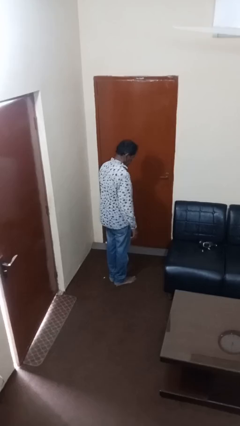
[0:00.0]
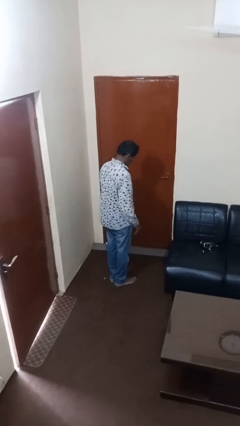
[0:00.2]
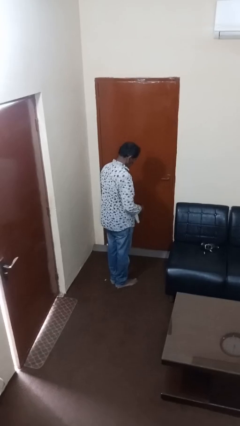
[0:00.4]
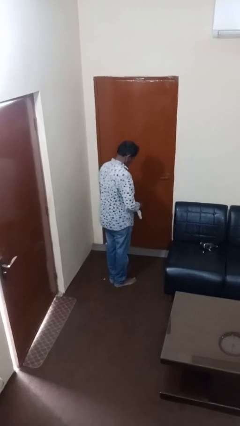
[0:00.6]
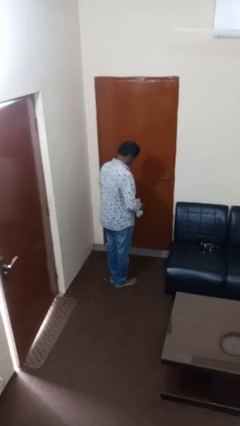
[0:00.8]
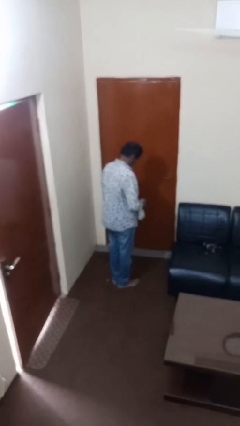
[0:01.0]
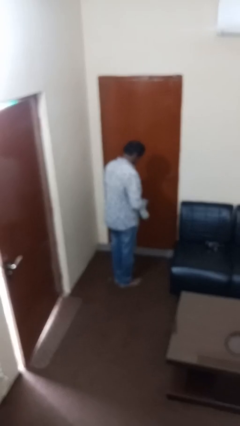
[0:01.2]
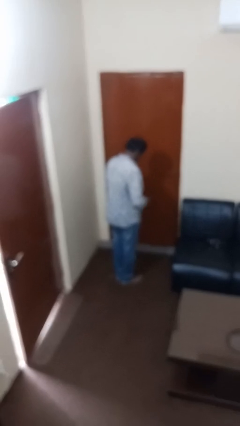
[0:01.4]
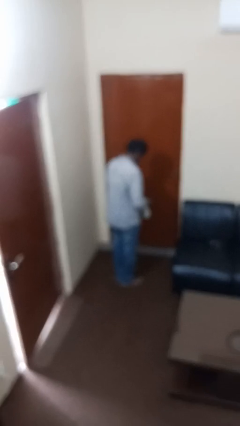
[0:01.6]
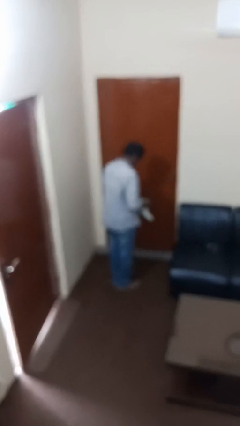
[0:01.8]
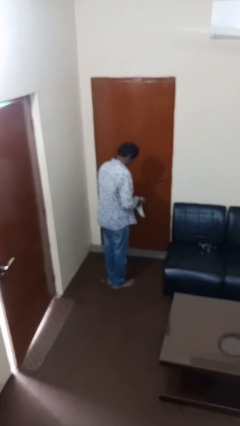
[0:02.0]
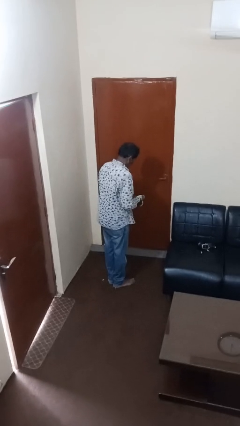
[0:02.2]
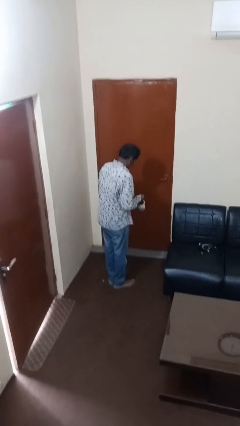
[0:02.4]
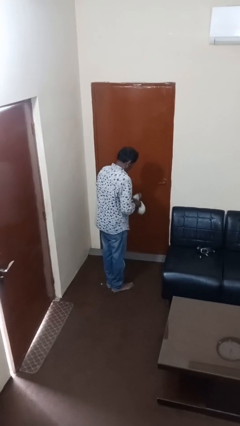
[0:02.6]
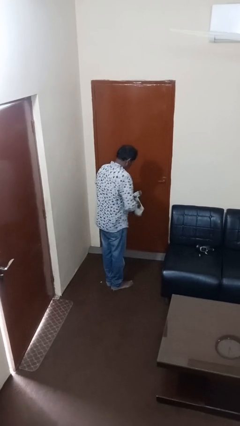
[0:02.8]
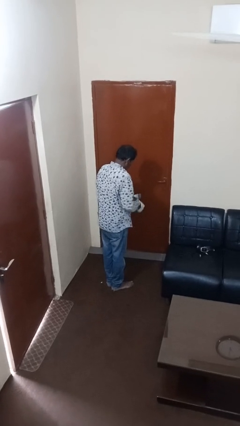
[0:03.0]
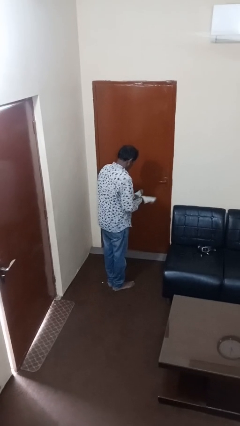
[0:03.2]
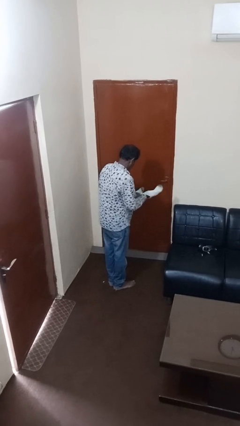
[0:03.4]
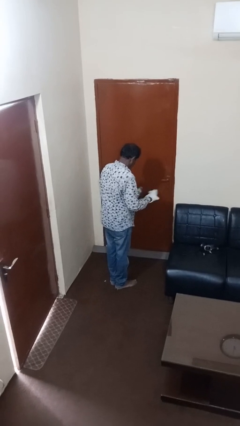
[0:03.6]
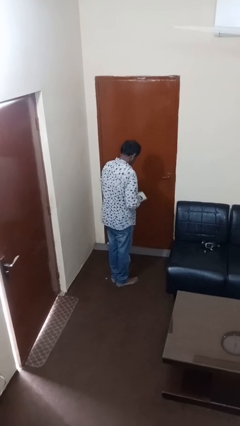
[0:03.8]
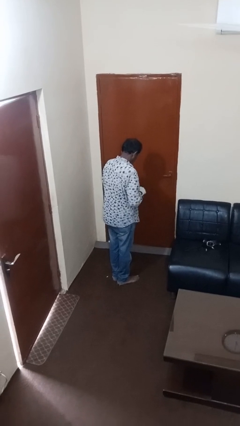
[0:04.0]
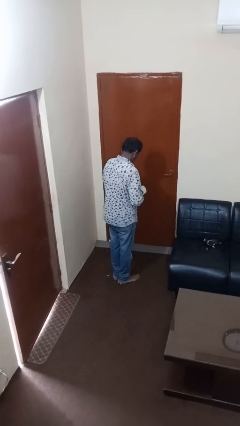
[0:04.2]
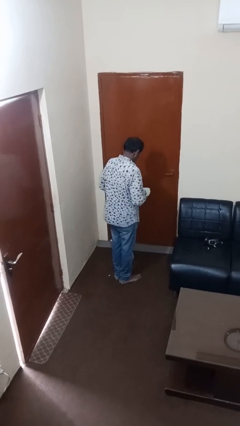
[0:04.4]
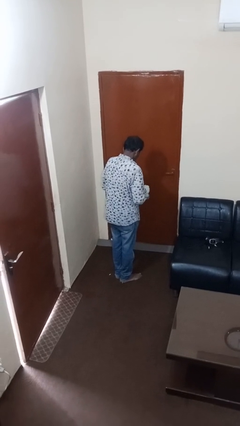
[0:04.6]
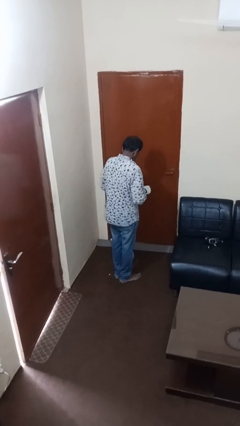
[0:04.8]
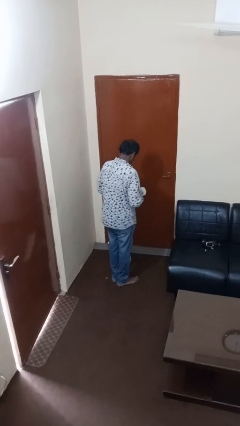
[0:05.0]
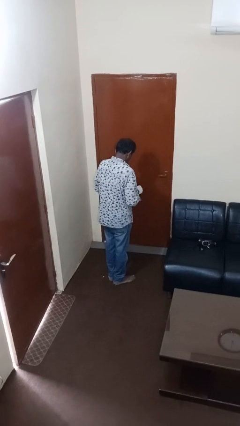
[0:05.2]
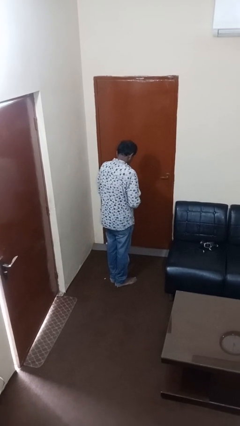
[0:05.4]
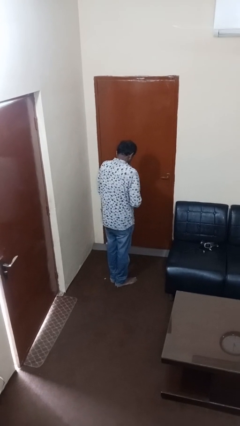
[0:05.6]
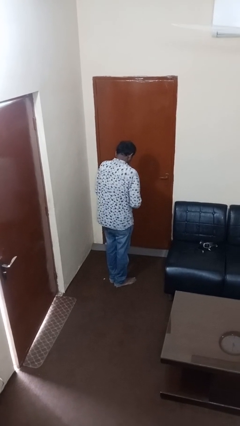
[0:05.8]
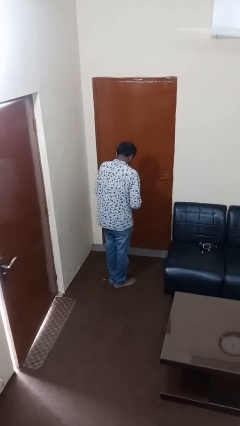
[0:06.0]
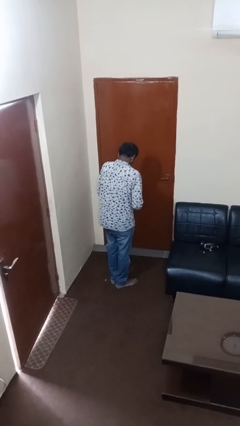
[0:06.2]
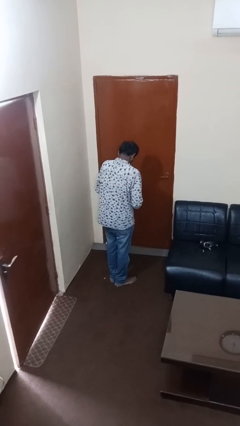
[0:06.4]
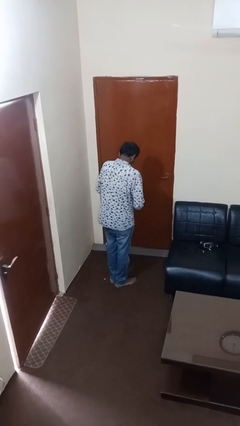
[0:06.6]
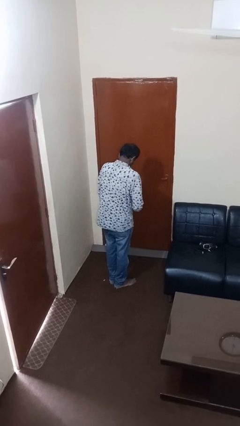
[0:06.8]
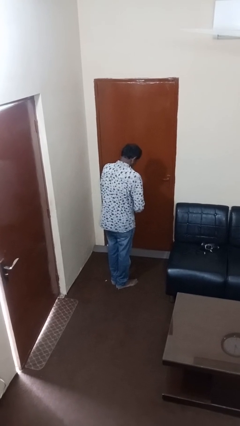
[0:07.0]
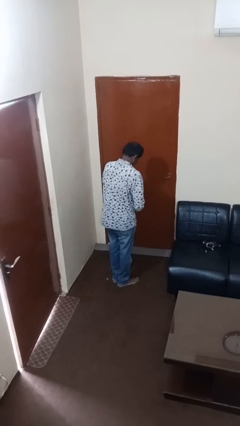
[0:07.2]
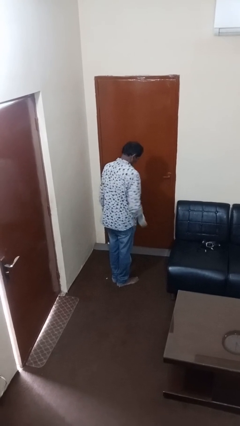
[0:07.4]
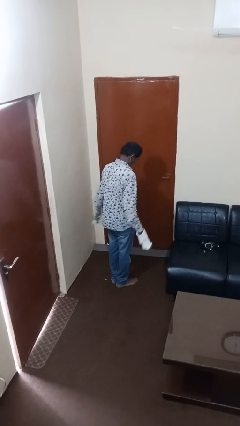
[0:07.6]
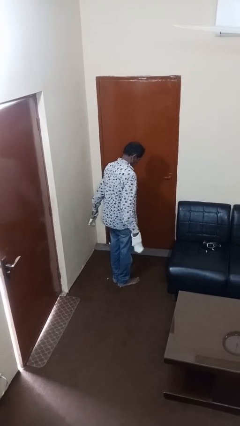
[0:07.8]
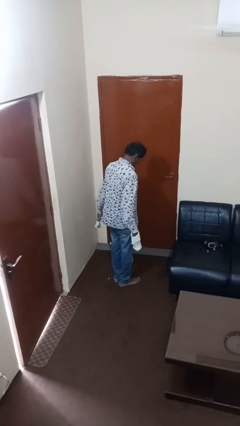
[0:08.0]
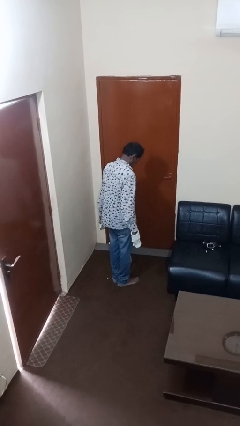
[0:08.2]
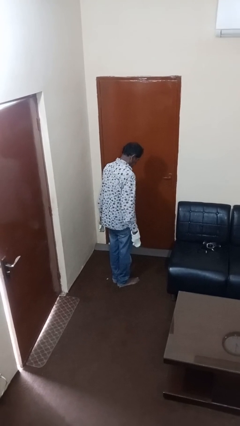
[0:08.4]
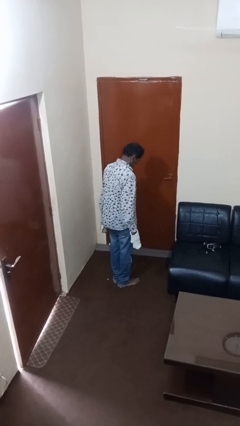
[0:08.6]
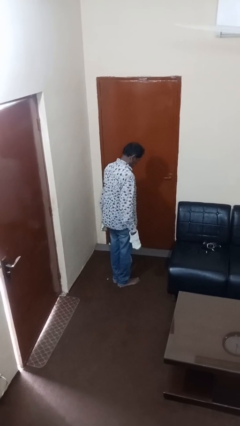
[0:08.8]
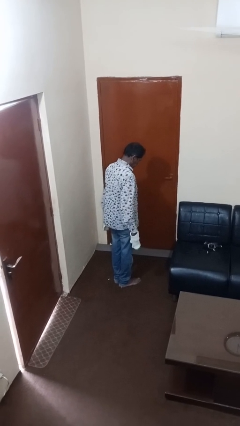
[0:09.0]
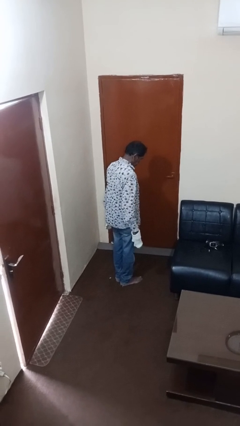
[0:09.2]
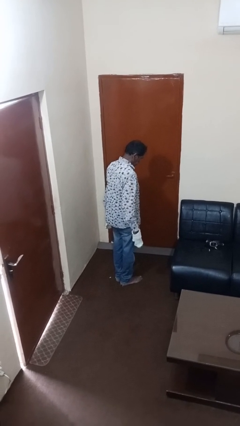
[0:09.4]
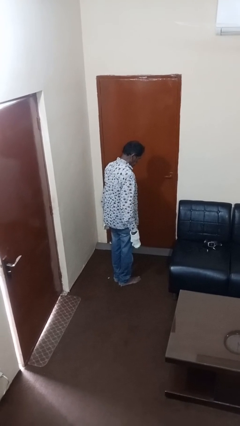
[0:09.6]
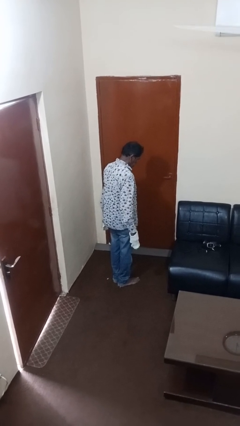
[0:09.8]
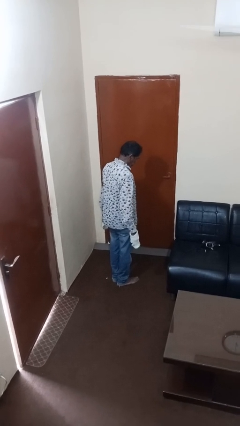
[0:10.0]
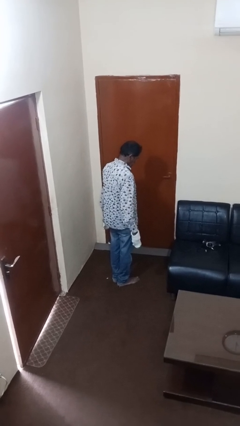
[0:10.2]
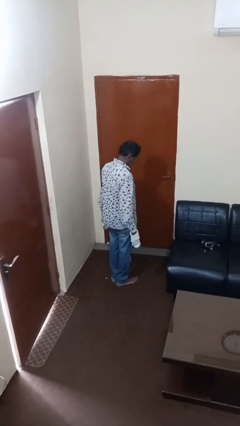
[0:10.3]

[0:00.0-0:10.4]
person puts on gloves

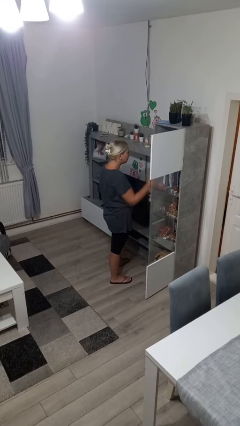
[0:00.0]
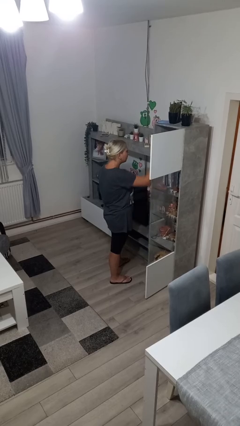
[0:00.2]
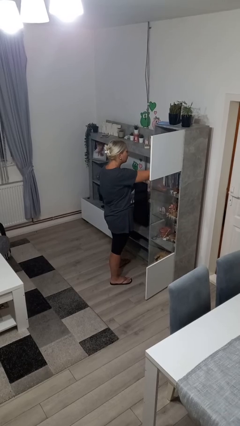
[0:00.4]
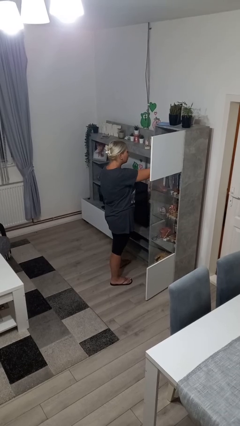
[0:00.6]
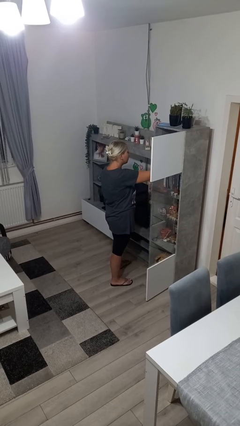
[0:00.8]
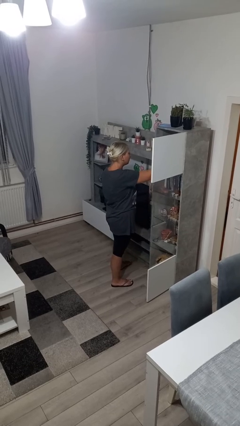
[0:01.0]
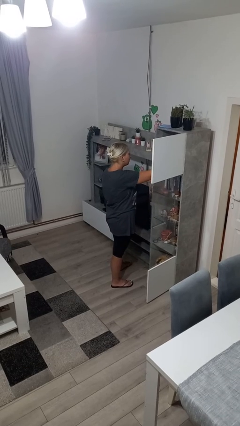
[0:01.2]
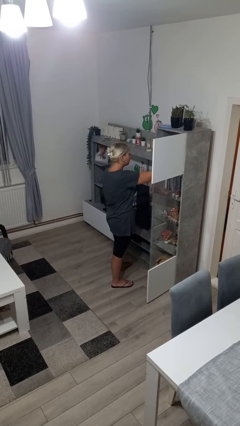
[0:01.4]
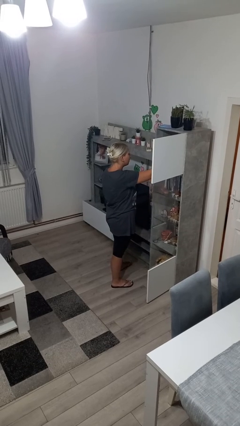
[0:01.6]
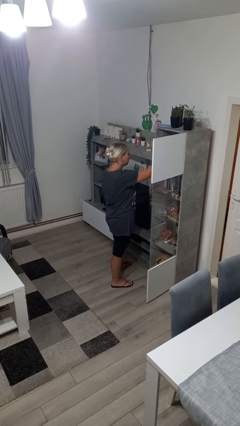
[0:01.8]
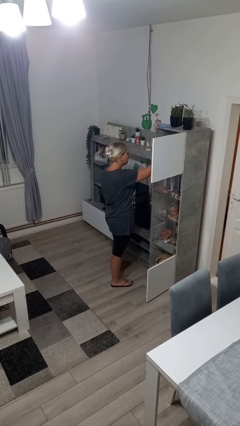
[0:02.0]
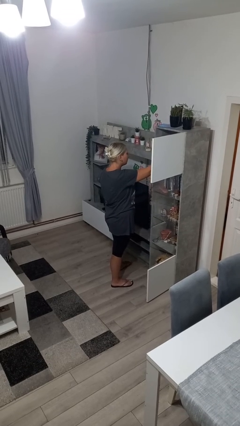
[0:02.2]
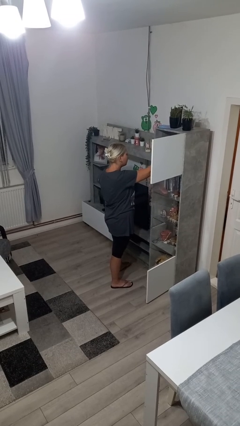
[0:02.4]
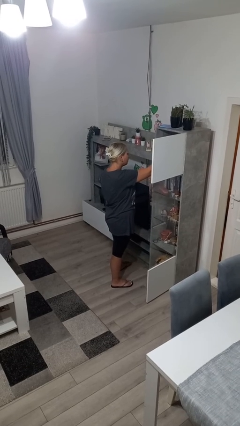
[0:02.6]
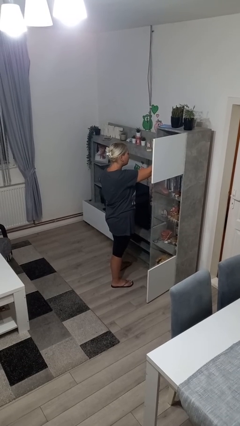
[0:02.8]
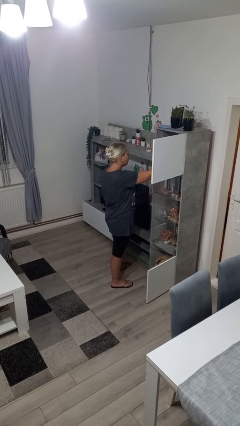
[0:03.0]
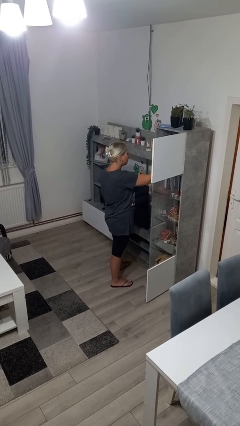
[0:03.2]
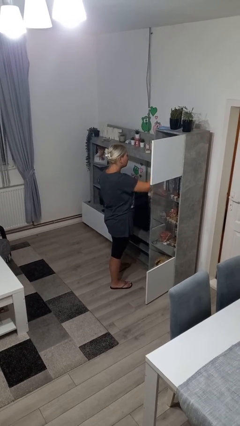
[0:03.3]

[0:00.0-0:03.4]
person searches in cabinet

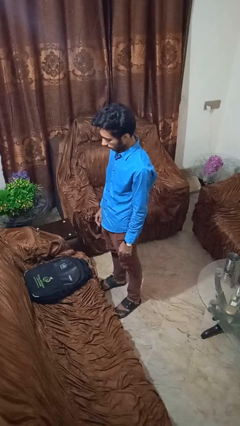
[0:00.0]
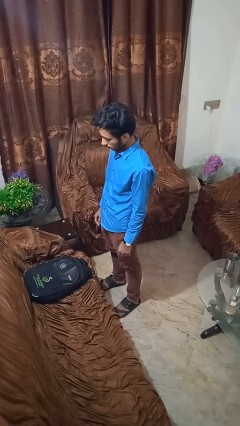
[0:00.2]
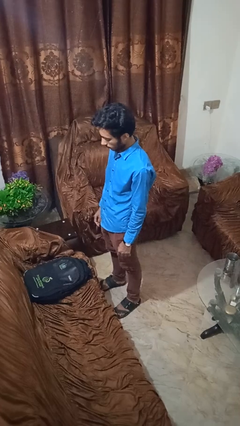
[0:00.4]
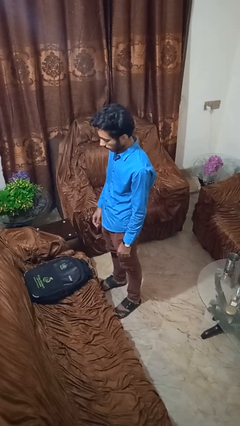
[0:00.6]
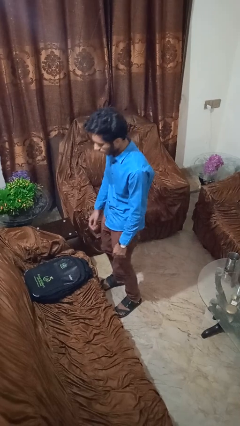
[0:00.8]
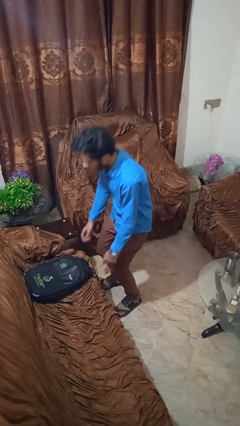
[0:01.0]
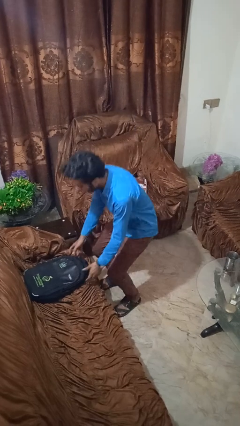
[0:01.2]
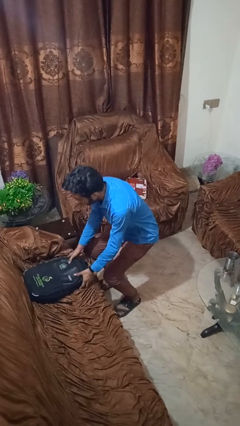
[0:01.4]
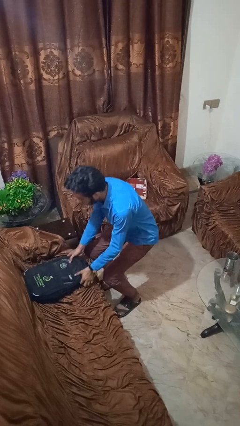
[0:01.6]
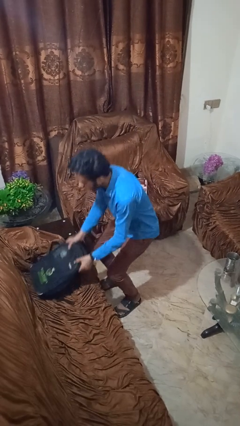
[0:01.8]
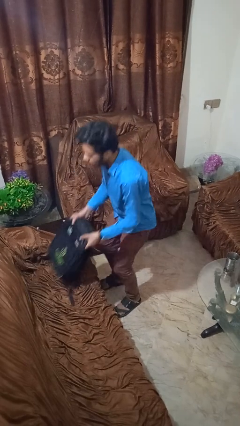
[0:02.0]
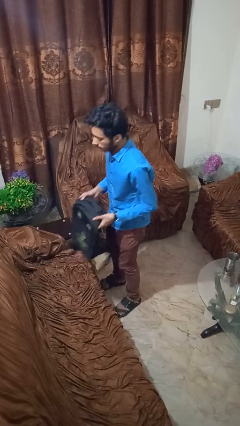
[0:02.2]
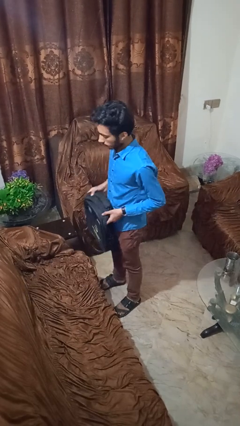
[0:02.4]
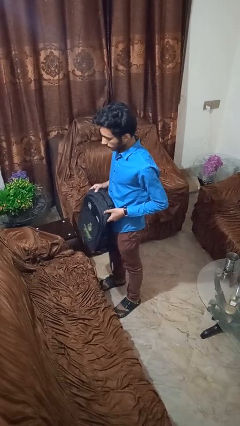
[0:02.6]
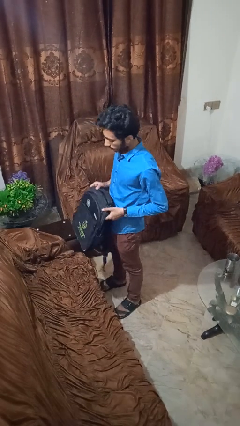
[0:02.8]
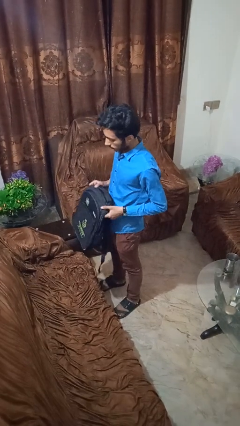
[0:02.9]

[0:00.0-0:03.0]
person picks up object from couch

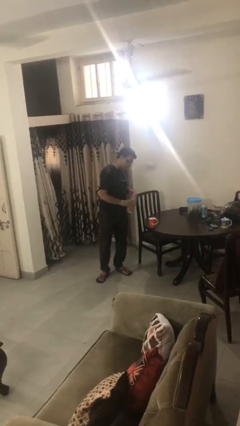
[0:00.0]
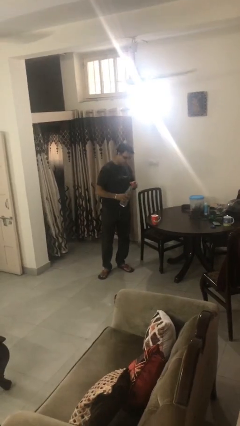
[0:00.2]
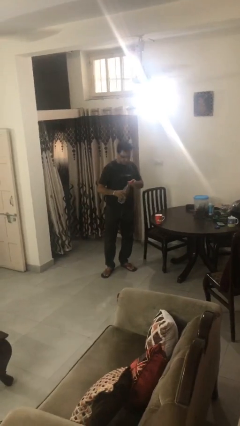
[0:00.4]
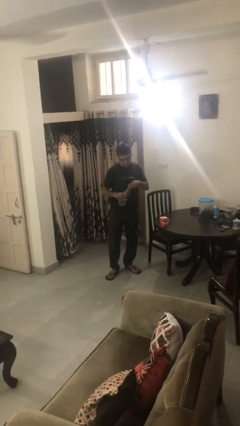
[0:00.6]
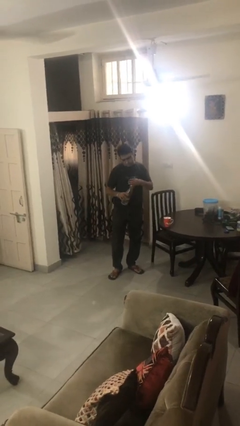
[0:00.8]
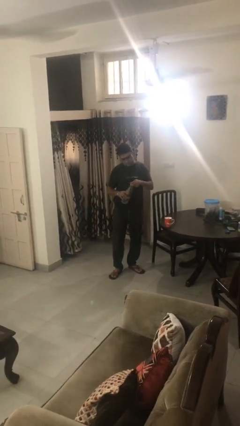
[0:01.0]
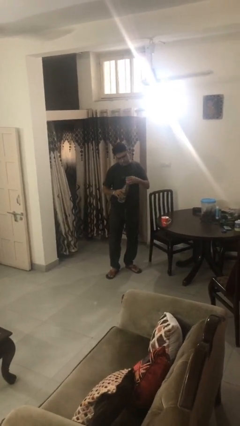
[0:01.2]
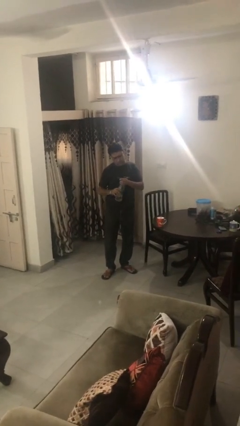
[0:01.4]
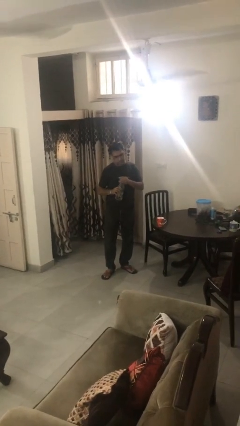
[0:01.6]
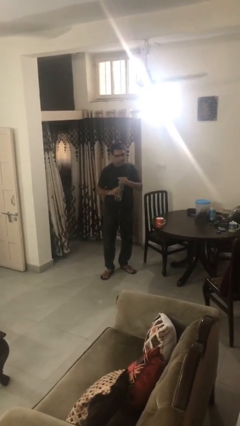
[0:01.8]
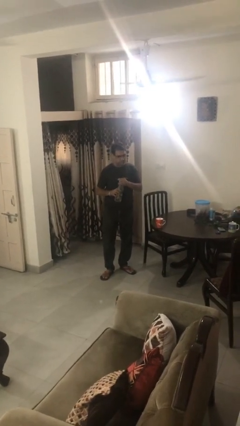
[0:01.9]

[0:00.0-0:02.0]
person screws lid to bottle
